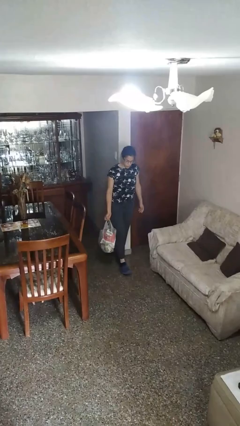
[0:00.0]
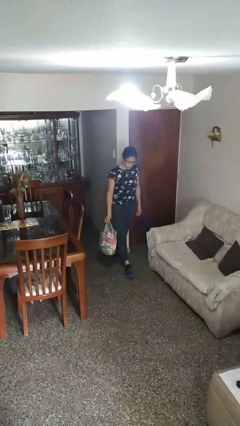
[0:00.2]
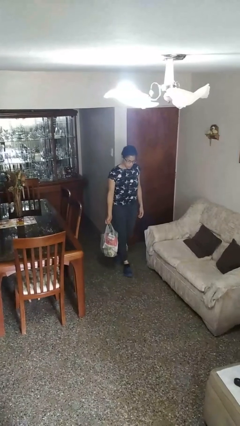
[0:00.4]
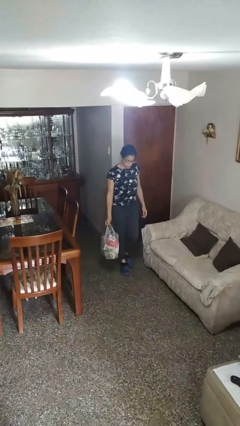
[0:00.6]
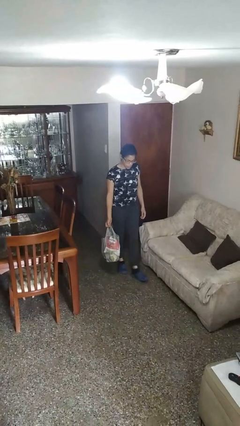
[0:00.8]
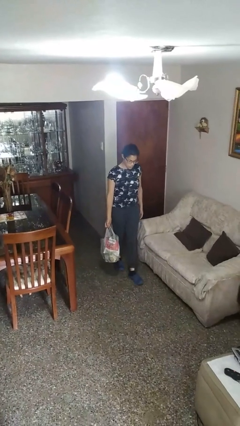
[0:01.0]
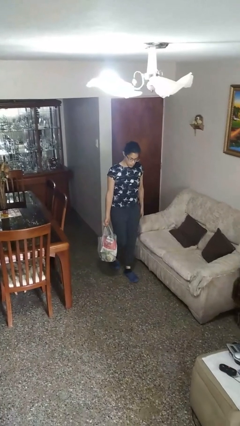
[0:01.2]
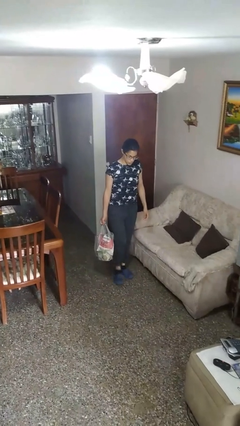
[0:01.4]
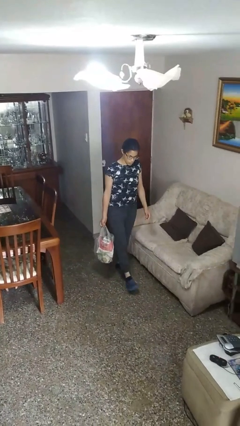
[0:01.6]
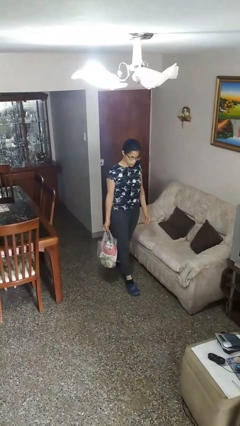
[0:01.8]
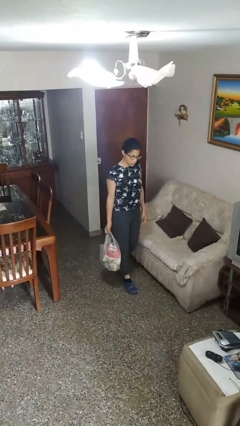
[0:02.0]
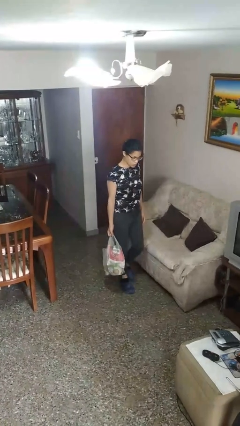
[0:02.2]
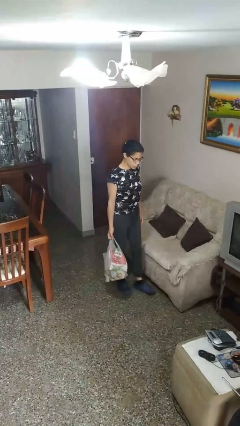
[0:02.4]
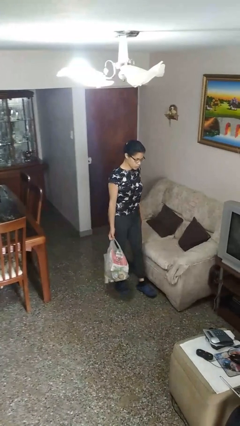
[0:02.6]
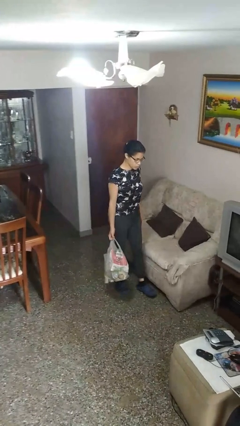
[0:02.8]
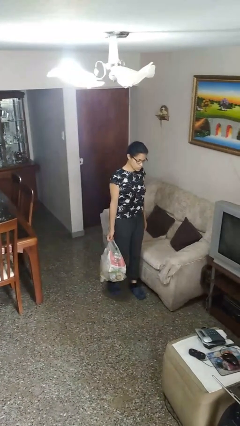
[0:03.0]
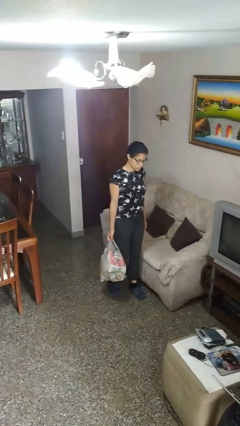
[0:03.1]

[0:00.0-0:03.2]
person carries groceries

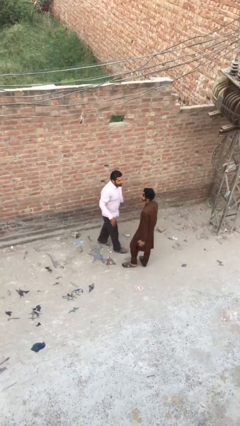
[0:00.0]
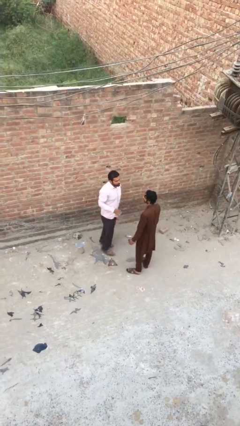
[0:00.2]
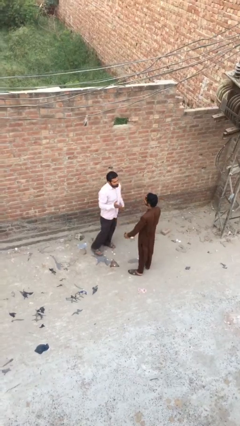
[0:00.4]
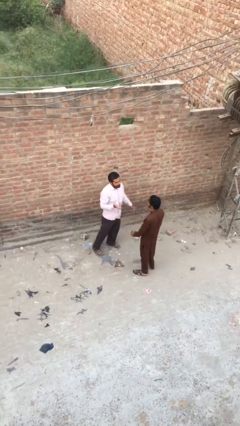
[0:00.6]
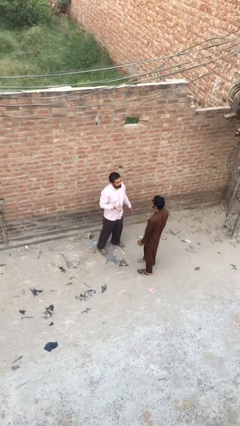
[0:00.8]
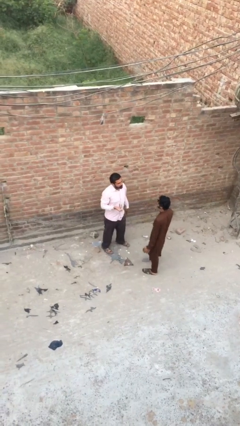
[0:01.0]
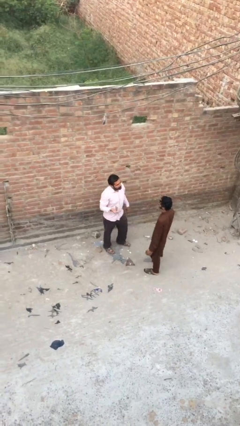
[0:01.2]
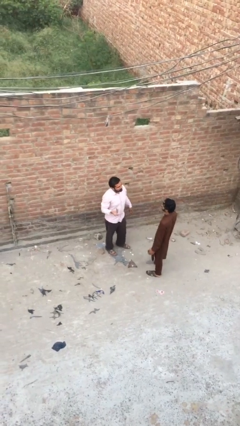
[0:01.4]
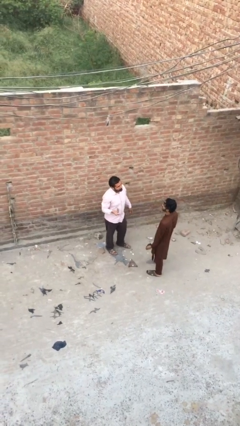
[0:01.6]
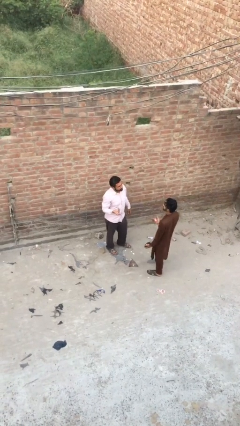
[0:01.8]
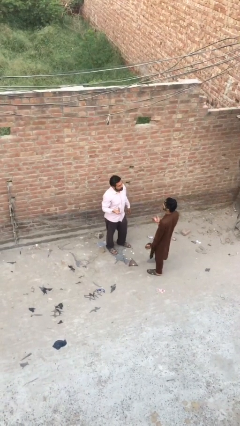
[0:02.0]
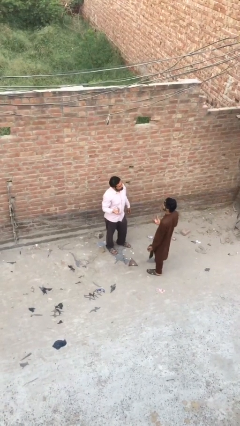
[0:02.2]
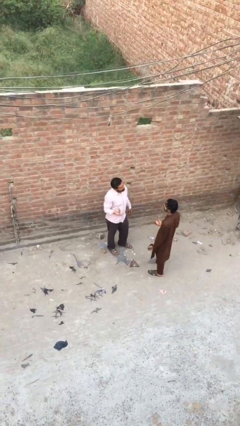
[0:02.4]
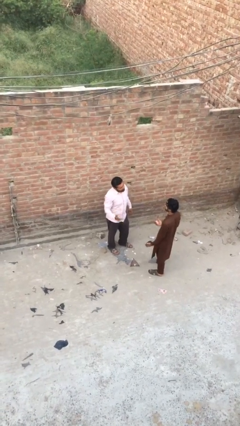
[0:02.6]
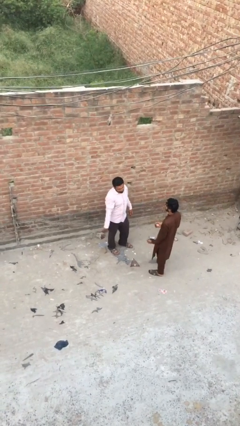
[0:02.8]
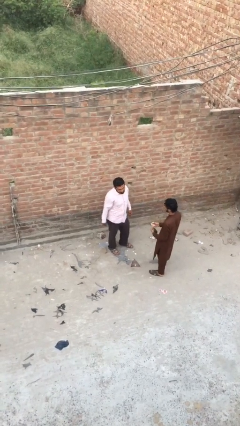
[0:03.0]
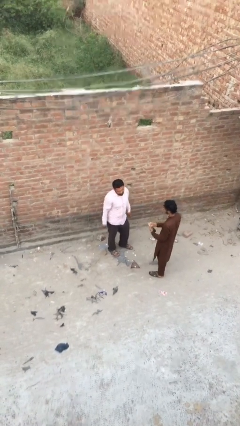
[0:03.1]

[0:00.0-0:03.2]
person talks to person

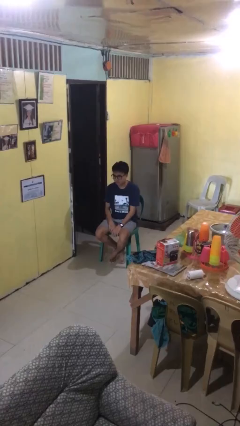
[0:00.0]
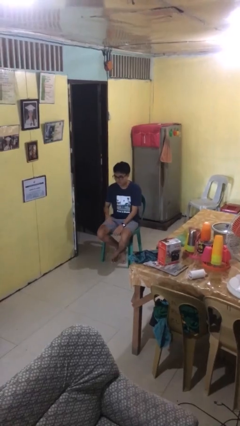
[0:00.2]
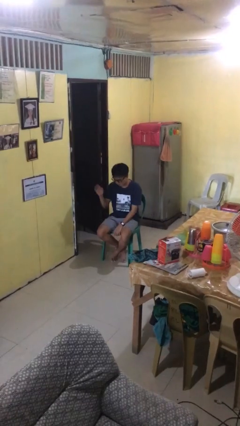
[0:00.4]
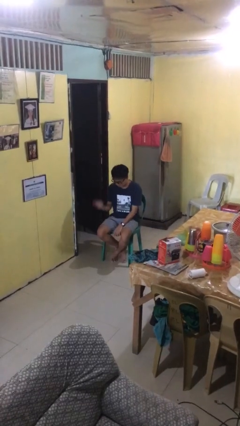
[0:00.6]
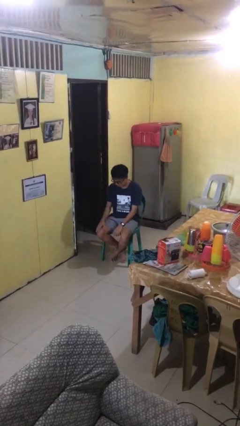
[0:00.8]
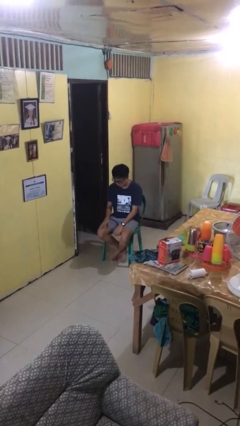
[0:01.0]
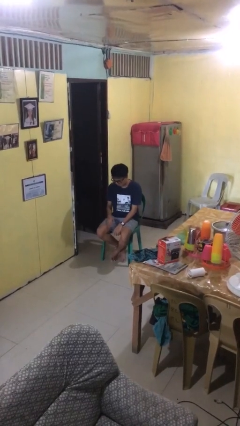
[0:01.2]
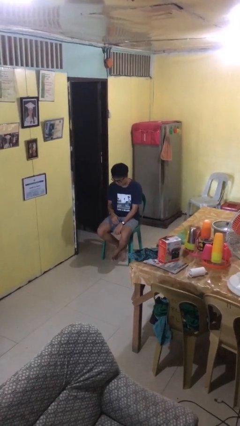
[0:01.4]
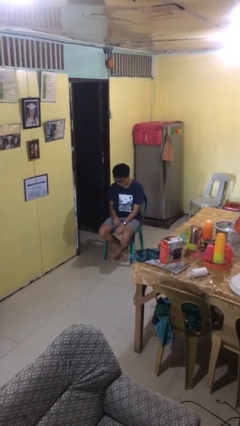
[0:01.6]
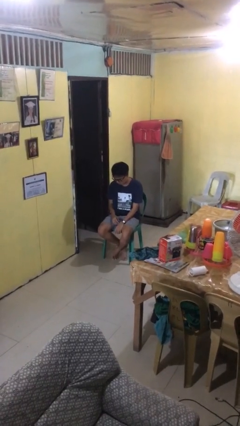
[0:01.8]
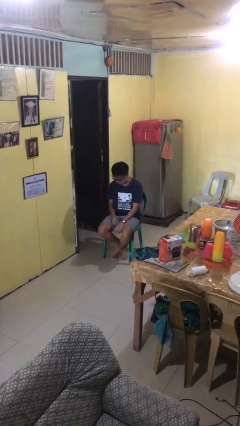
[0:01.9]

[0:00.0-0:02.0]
person swats bug

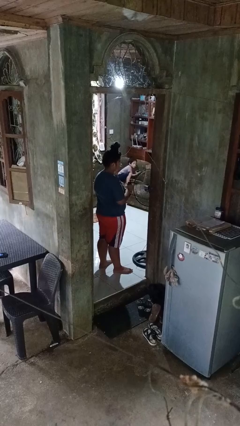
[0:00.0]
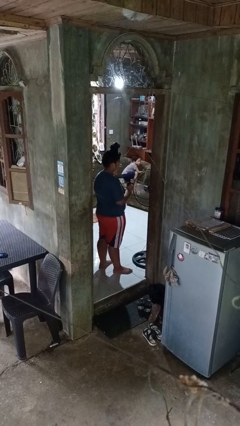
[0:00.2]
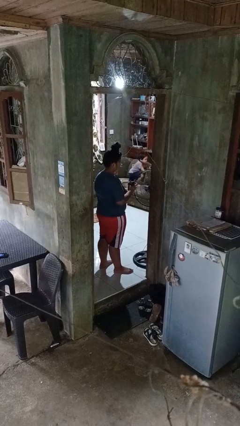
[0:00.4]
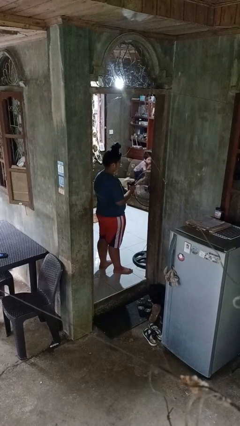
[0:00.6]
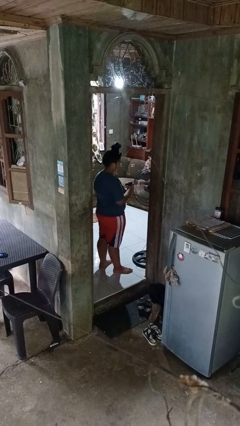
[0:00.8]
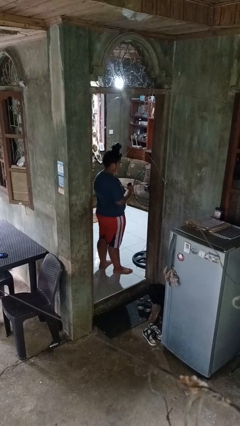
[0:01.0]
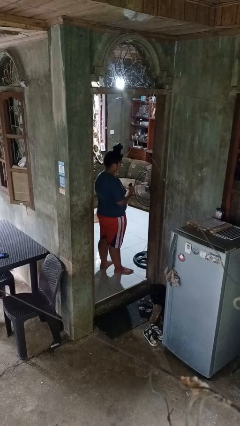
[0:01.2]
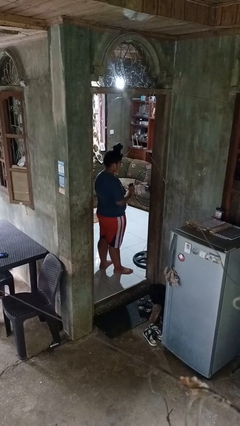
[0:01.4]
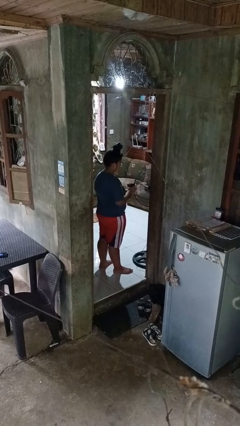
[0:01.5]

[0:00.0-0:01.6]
person squeezes object

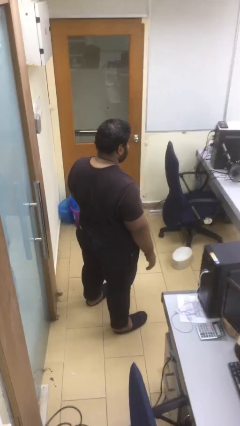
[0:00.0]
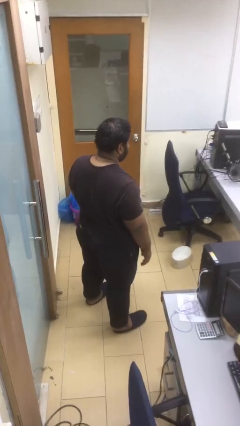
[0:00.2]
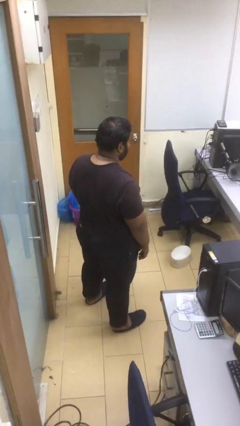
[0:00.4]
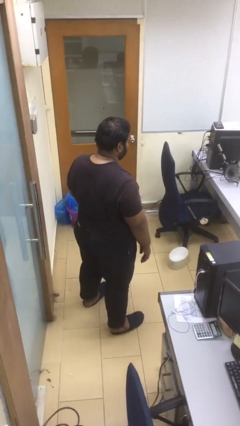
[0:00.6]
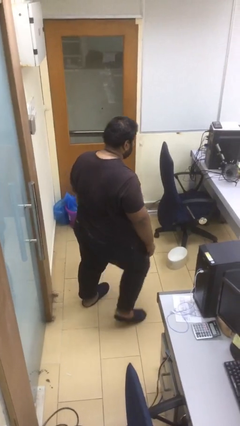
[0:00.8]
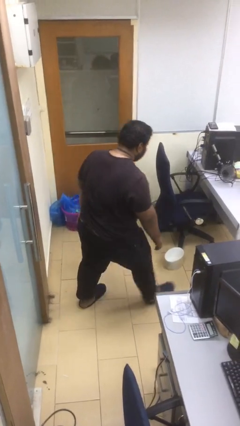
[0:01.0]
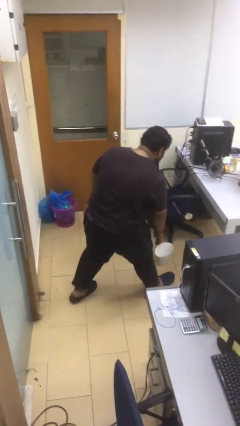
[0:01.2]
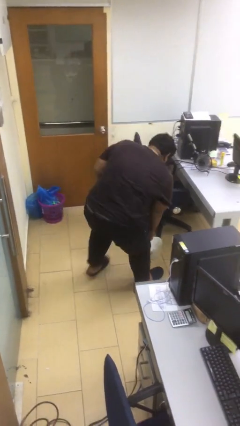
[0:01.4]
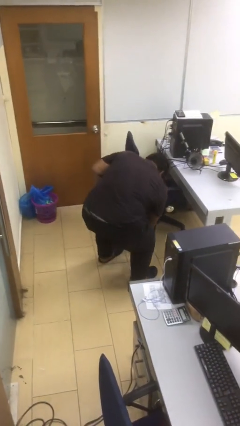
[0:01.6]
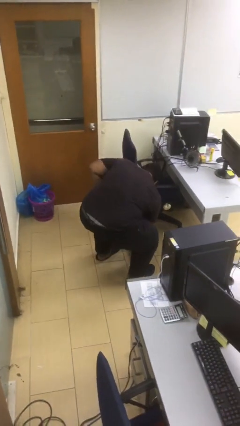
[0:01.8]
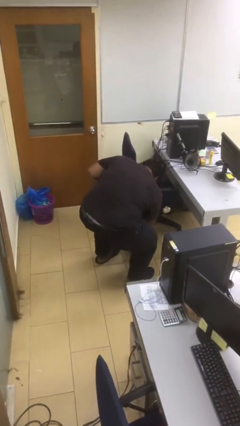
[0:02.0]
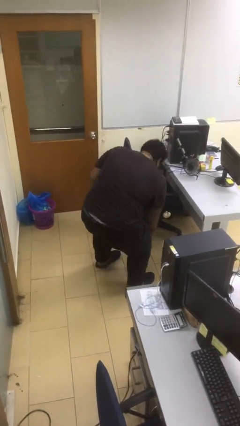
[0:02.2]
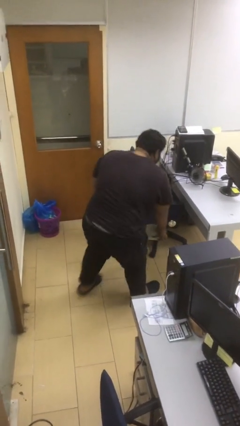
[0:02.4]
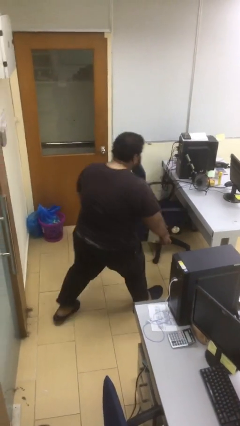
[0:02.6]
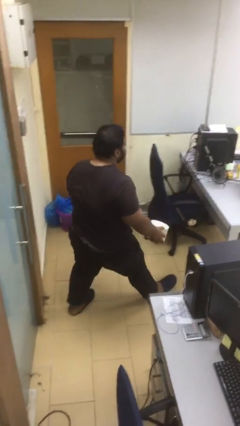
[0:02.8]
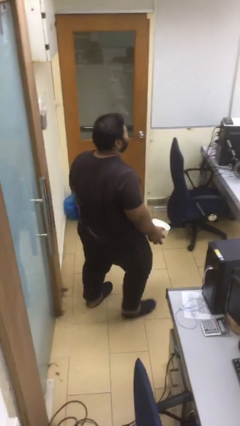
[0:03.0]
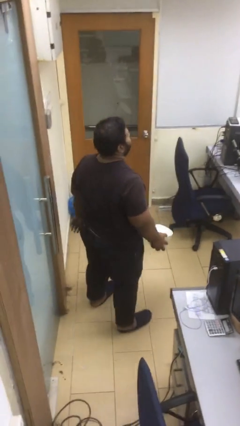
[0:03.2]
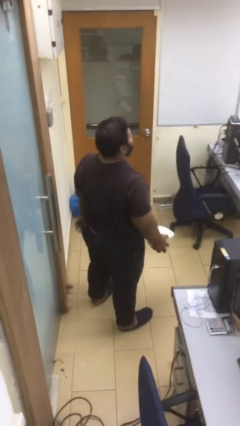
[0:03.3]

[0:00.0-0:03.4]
person picks up object from floor

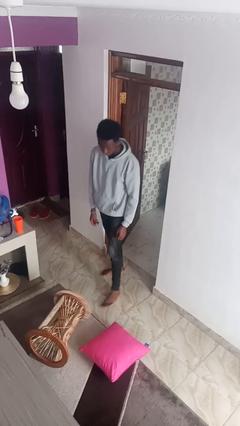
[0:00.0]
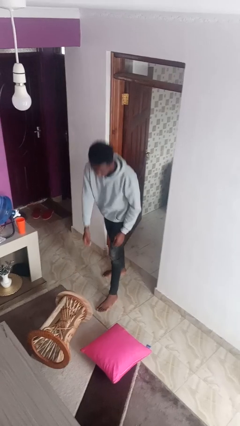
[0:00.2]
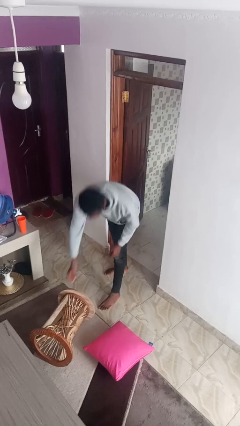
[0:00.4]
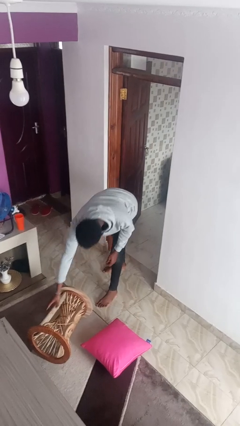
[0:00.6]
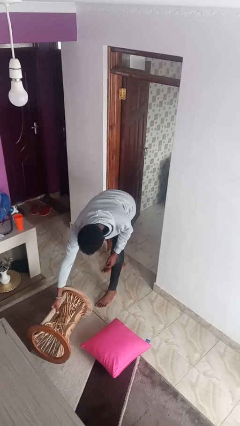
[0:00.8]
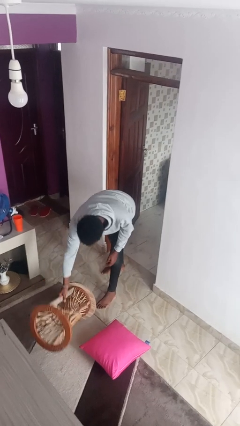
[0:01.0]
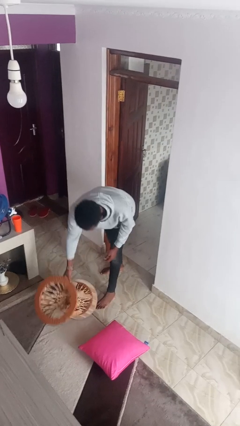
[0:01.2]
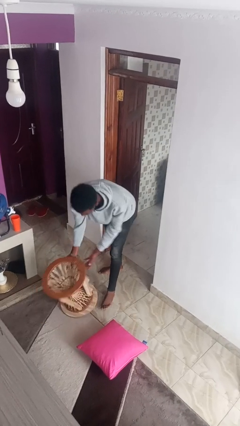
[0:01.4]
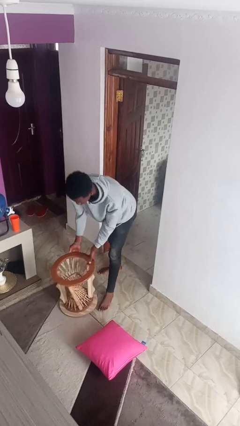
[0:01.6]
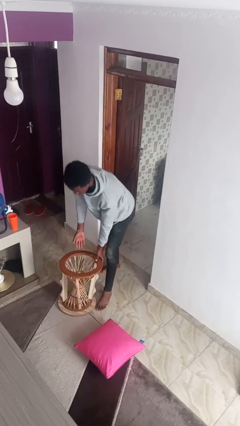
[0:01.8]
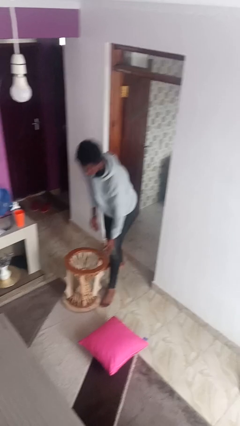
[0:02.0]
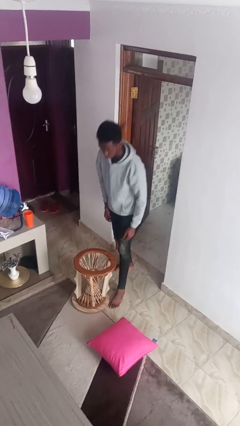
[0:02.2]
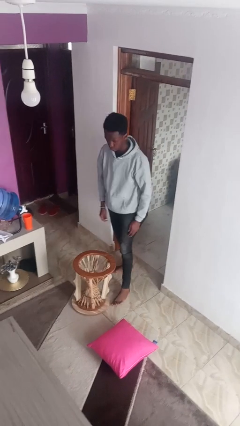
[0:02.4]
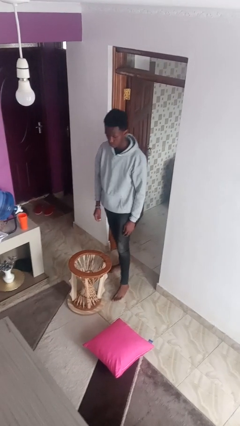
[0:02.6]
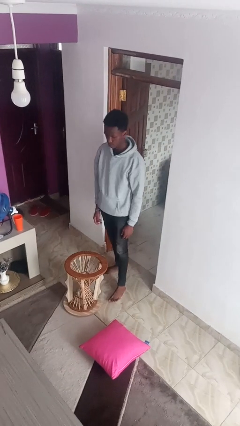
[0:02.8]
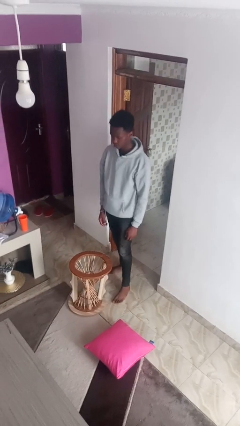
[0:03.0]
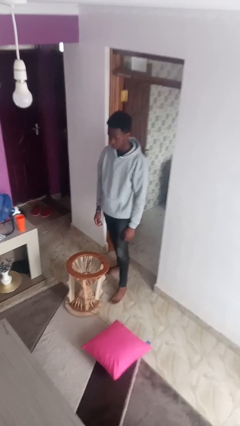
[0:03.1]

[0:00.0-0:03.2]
person sets upright furniture

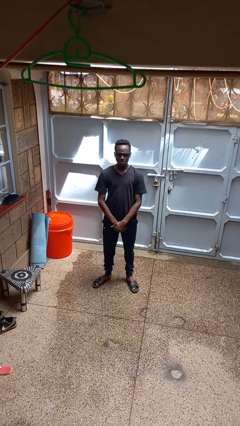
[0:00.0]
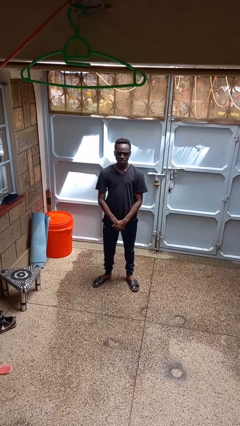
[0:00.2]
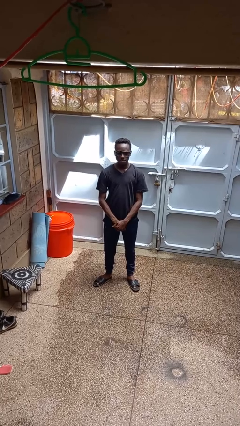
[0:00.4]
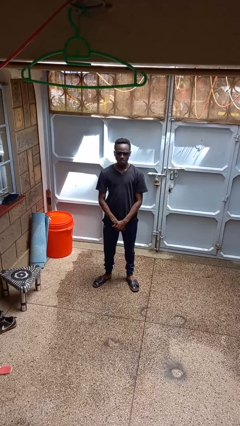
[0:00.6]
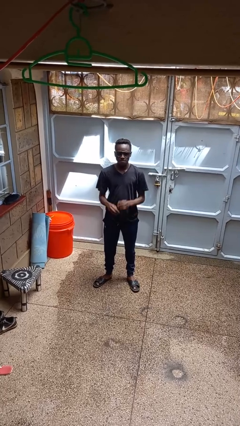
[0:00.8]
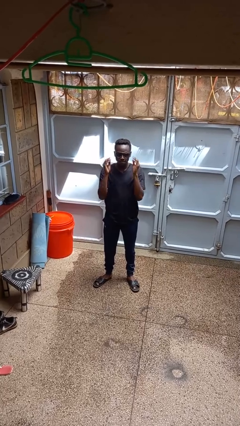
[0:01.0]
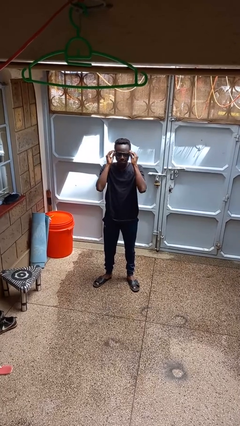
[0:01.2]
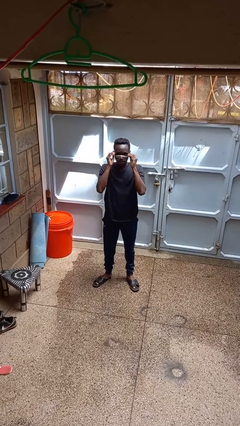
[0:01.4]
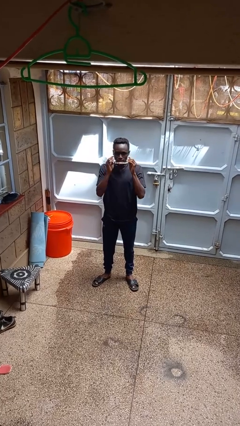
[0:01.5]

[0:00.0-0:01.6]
person takes off sunglasses
